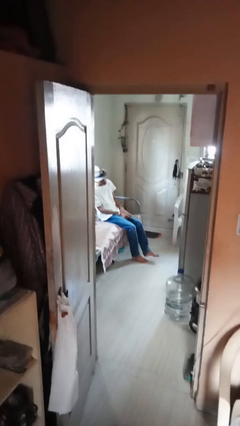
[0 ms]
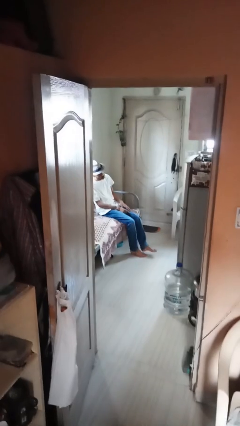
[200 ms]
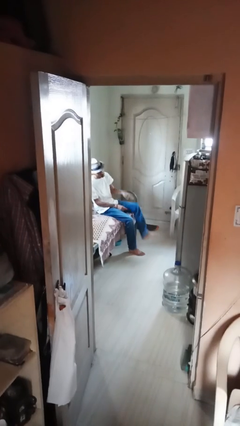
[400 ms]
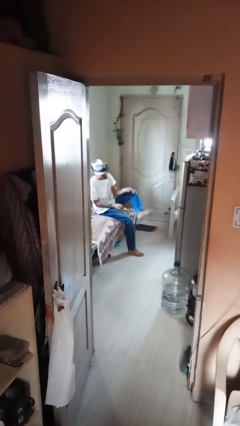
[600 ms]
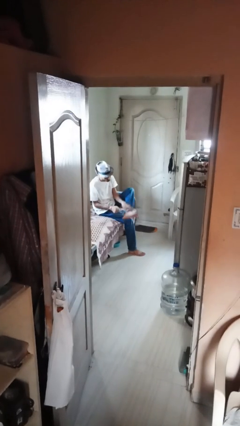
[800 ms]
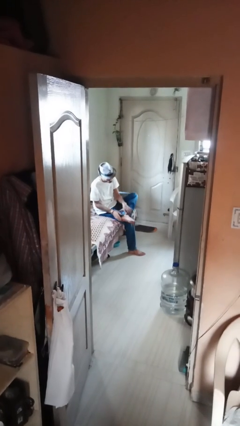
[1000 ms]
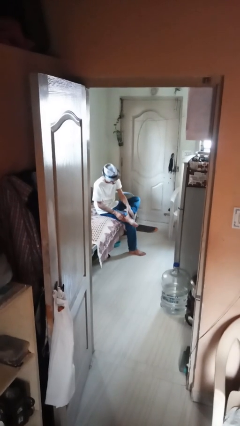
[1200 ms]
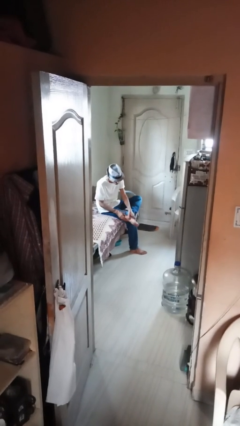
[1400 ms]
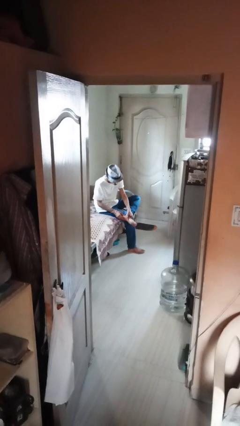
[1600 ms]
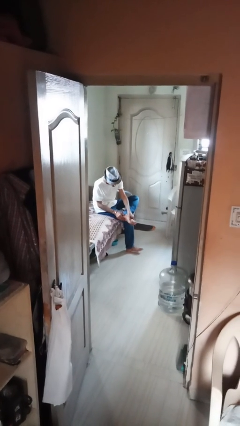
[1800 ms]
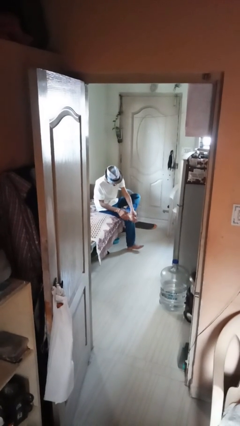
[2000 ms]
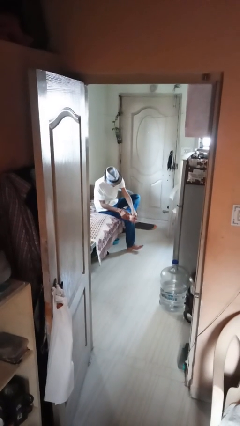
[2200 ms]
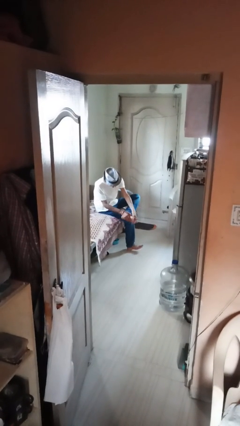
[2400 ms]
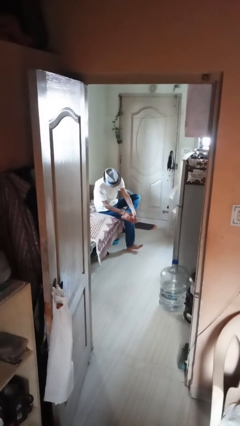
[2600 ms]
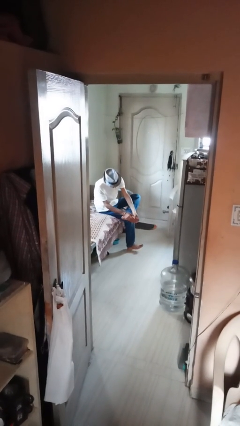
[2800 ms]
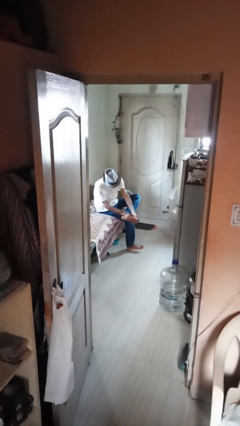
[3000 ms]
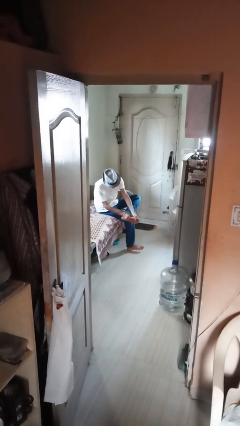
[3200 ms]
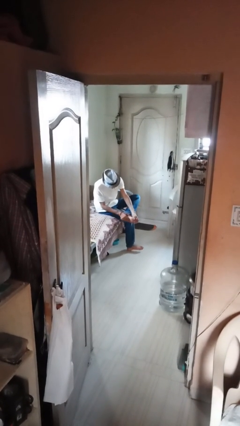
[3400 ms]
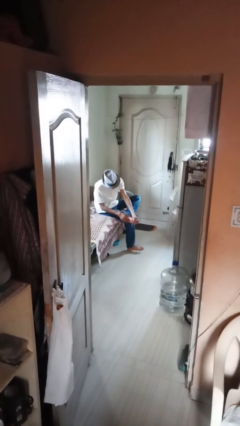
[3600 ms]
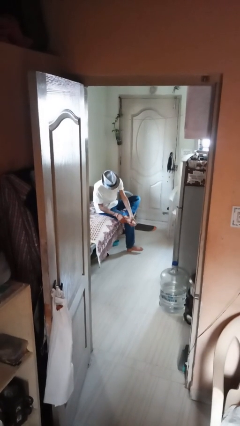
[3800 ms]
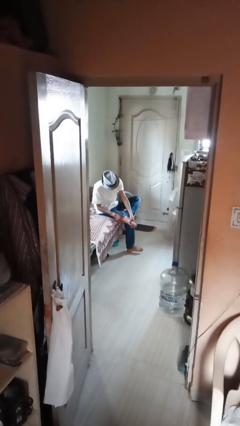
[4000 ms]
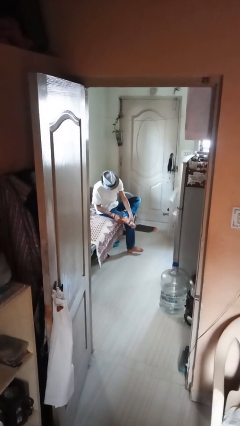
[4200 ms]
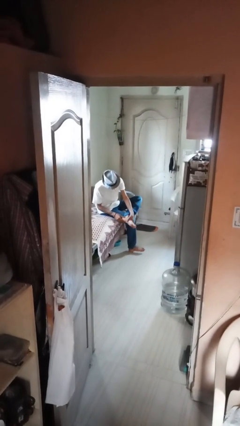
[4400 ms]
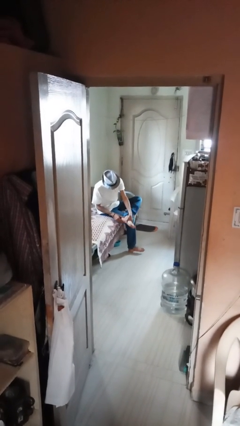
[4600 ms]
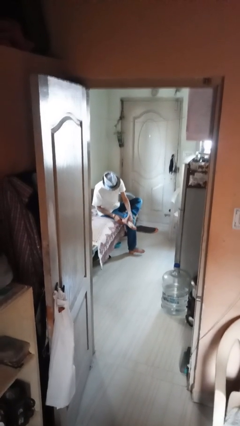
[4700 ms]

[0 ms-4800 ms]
person rubs foot

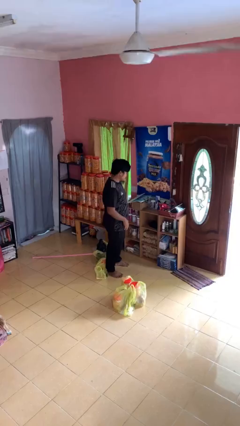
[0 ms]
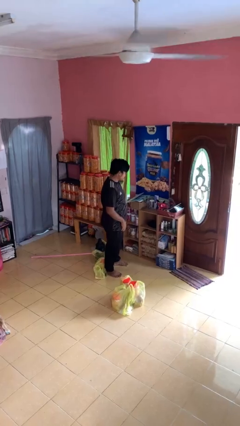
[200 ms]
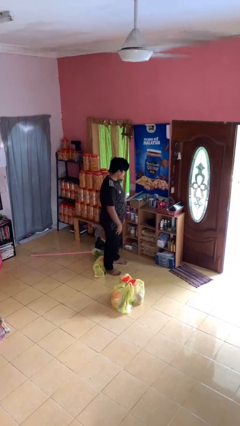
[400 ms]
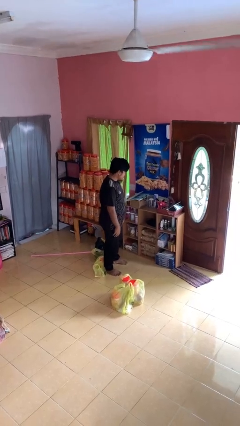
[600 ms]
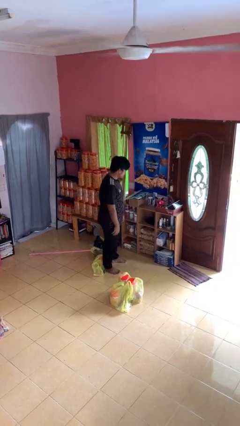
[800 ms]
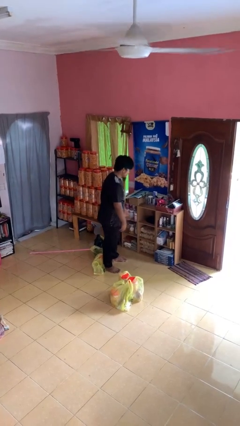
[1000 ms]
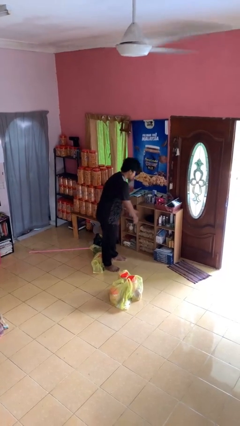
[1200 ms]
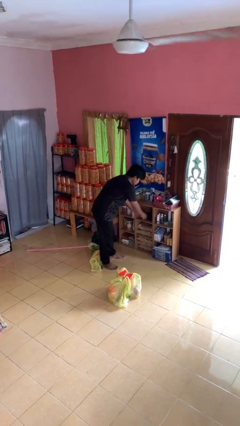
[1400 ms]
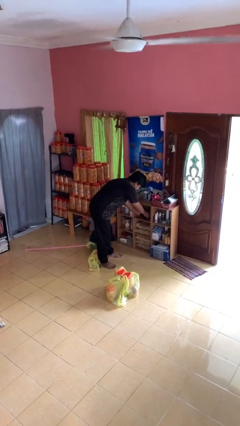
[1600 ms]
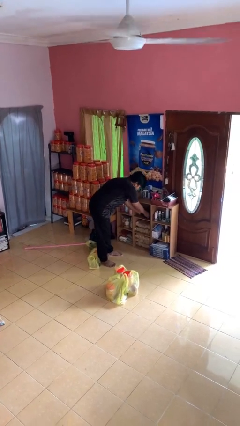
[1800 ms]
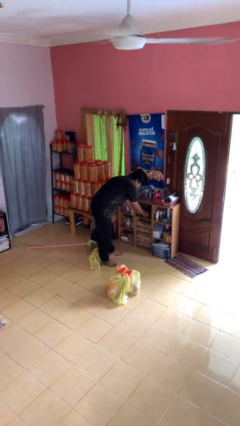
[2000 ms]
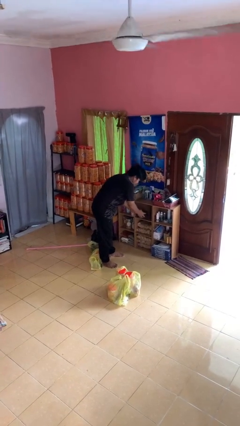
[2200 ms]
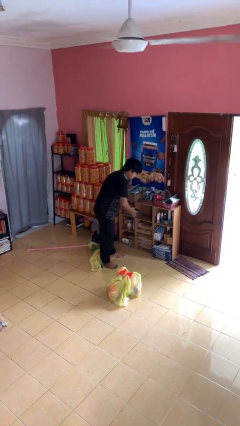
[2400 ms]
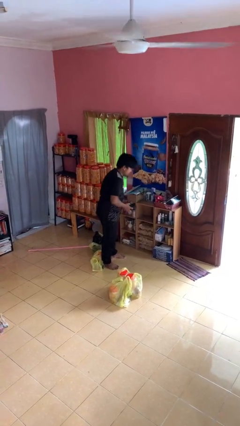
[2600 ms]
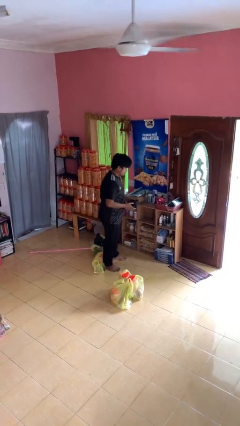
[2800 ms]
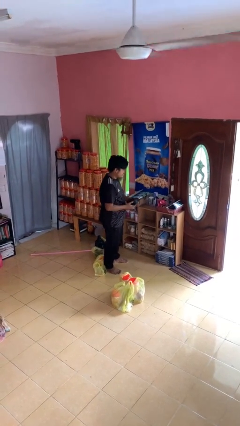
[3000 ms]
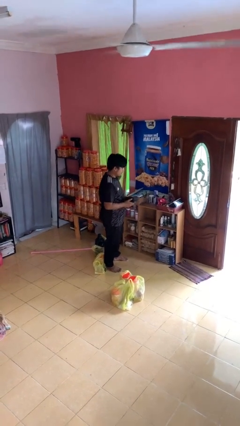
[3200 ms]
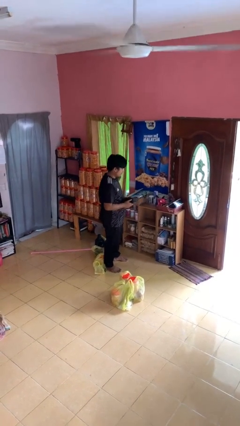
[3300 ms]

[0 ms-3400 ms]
person takes object from cabinet

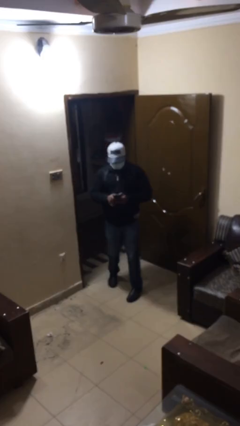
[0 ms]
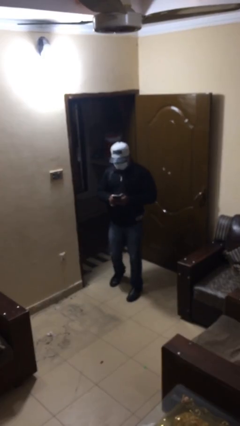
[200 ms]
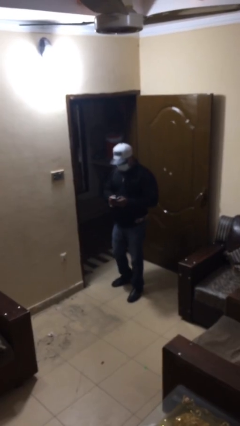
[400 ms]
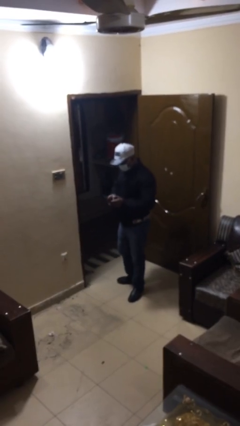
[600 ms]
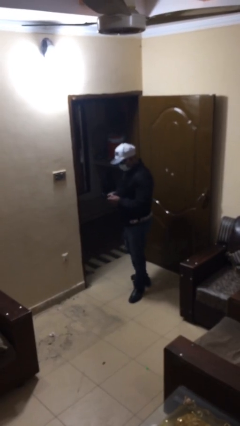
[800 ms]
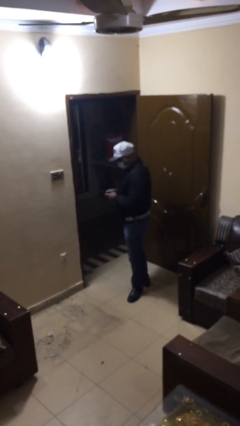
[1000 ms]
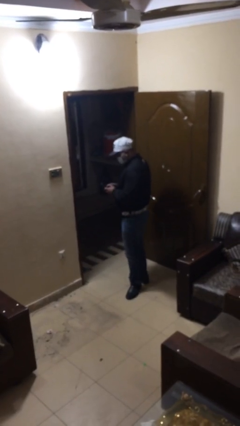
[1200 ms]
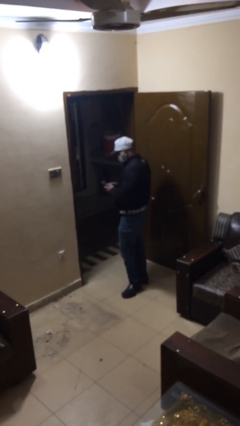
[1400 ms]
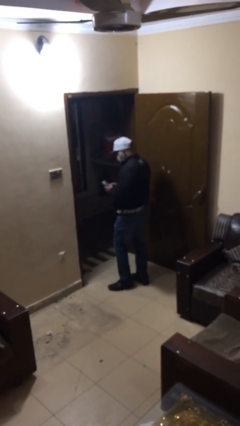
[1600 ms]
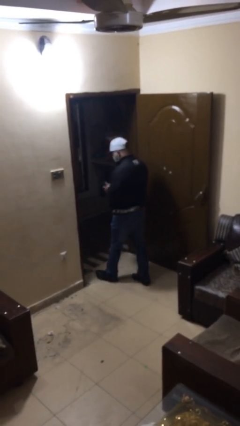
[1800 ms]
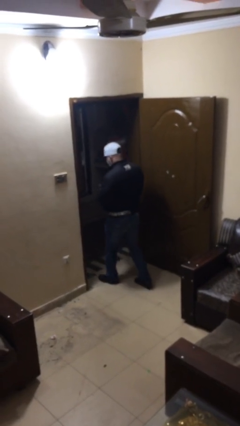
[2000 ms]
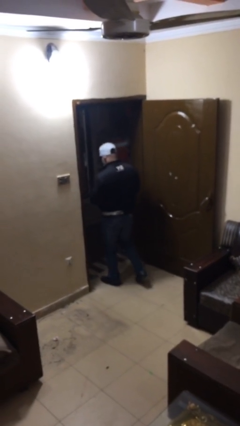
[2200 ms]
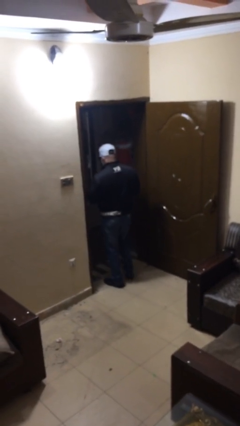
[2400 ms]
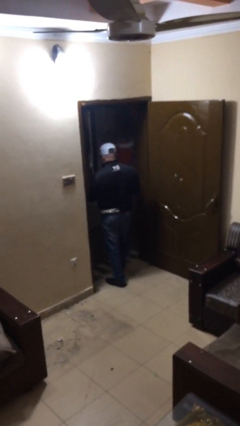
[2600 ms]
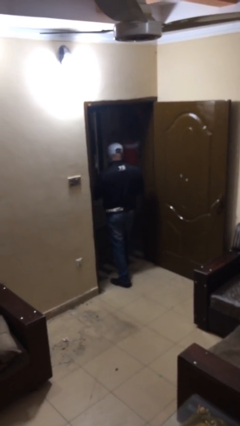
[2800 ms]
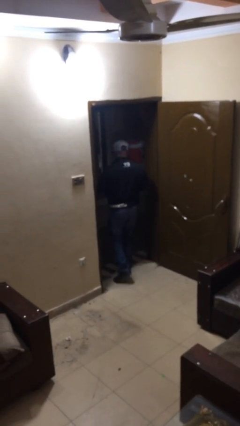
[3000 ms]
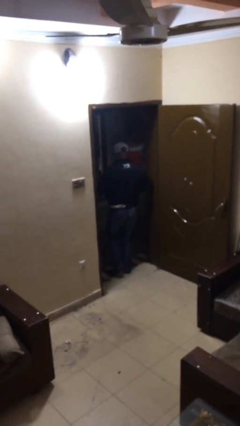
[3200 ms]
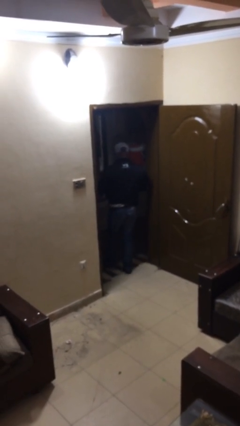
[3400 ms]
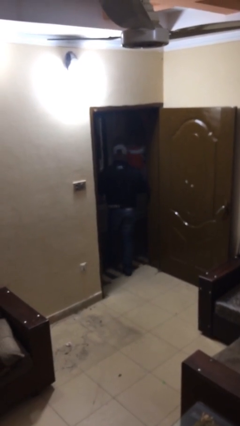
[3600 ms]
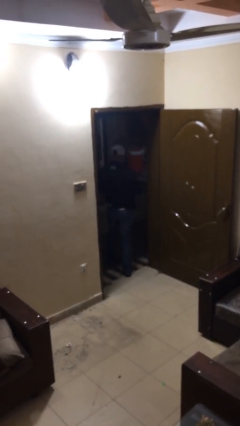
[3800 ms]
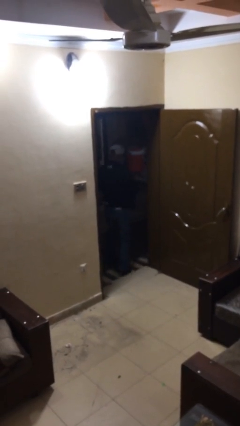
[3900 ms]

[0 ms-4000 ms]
person exits scene through structure

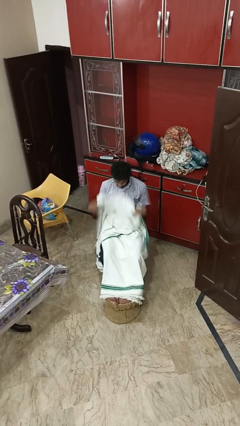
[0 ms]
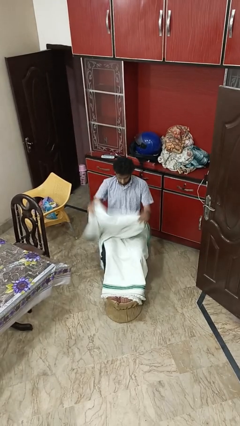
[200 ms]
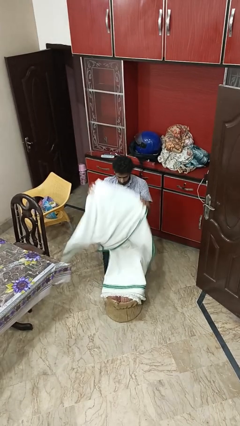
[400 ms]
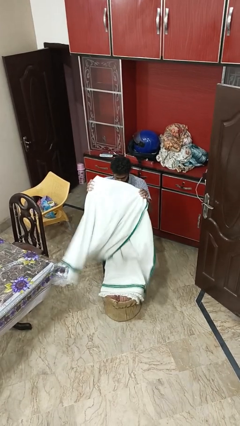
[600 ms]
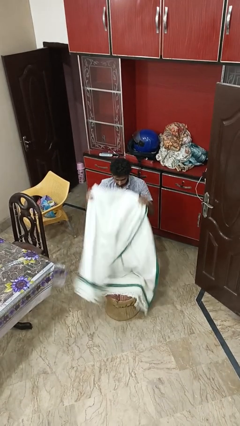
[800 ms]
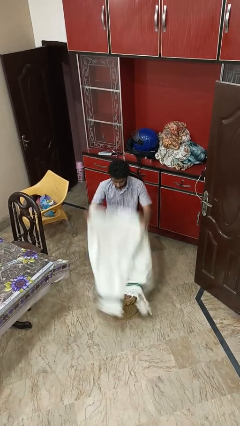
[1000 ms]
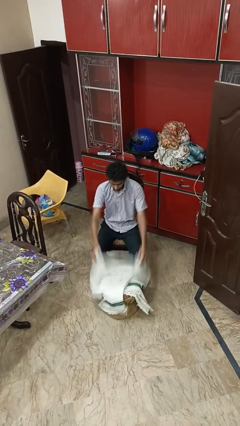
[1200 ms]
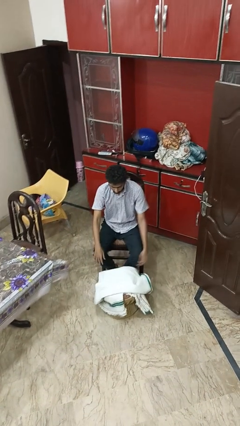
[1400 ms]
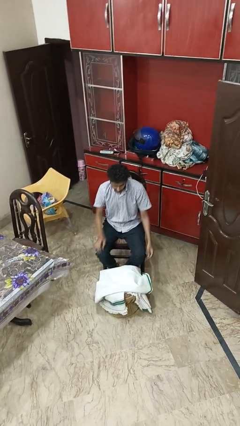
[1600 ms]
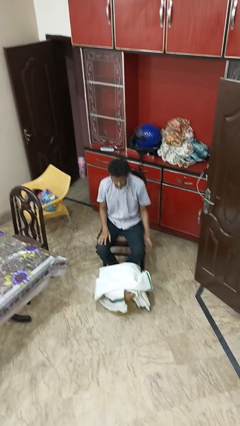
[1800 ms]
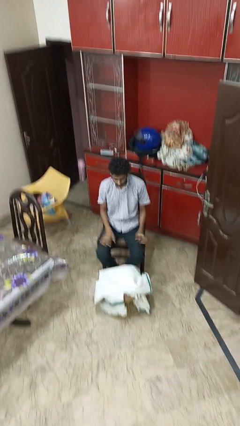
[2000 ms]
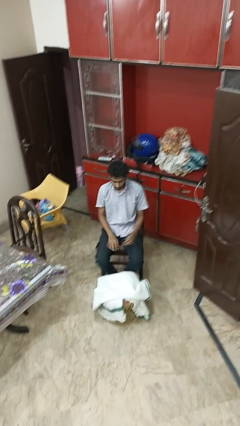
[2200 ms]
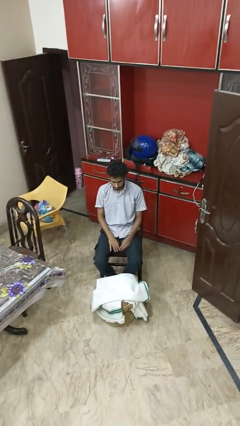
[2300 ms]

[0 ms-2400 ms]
person uncovers with blanket

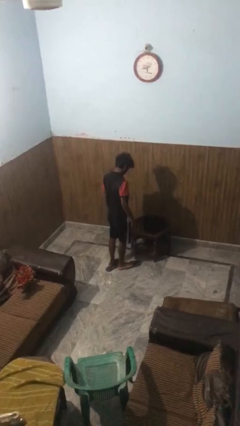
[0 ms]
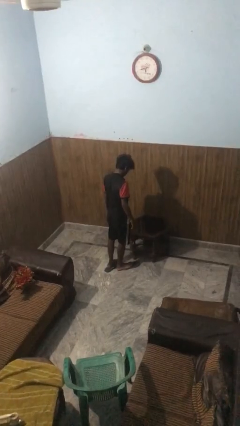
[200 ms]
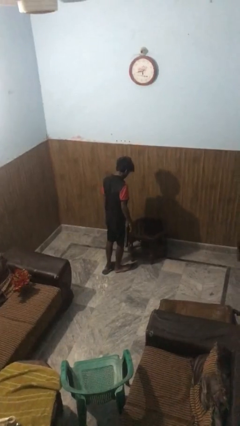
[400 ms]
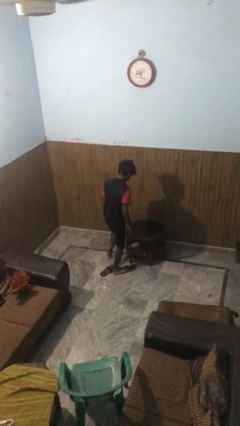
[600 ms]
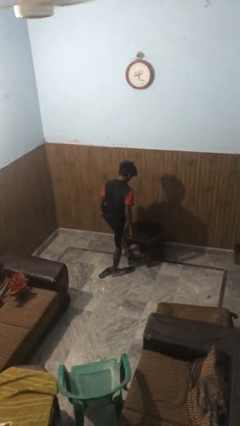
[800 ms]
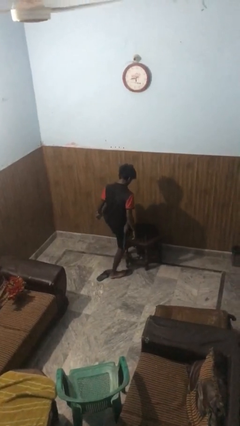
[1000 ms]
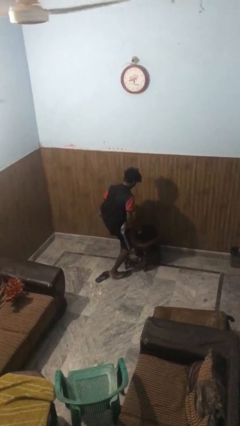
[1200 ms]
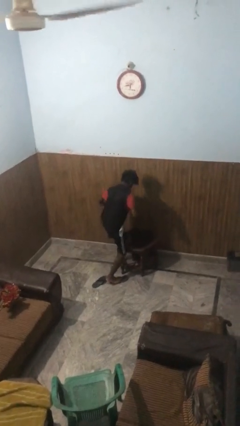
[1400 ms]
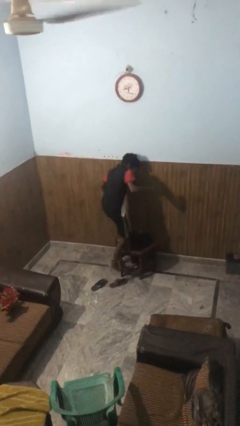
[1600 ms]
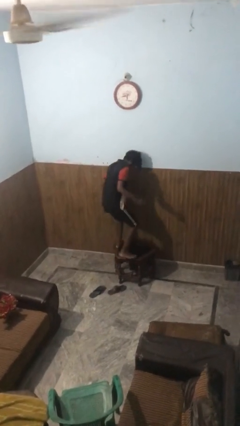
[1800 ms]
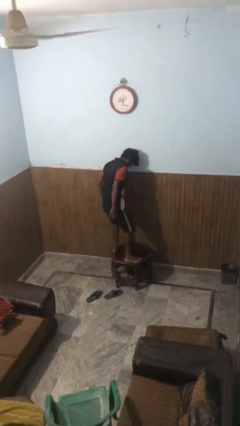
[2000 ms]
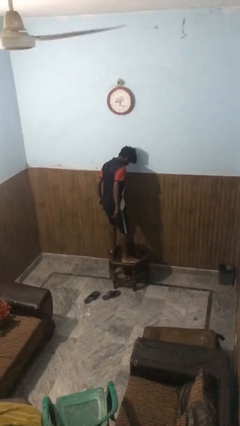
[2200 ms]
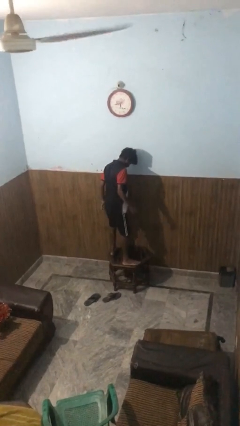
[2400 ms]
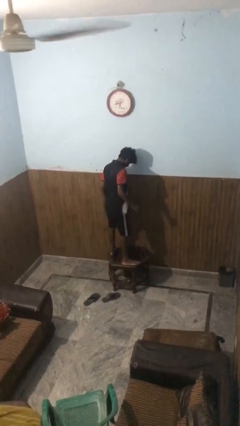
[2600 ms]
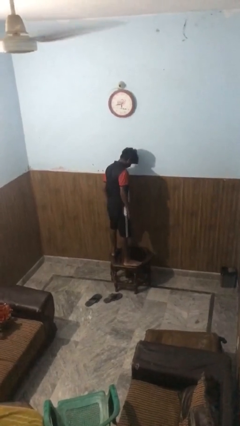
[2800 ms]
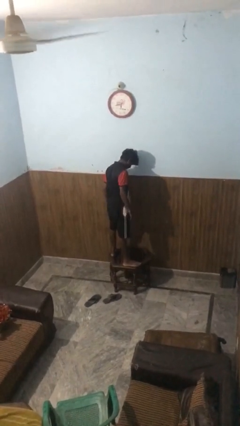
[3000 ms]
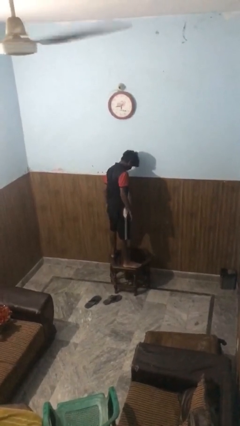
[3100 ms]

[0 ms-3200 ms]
person climbs on table
